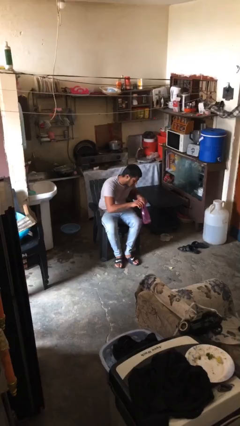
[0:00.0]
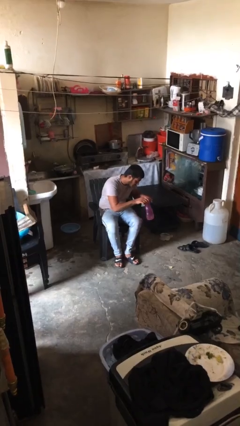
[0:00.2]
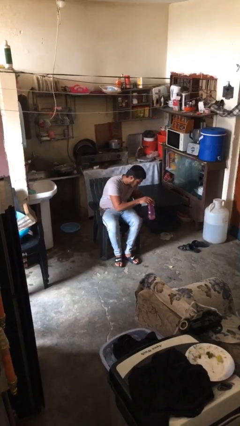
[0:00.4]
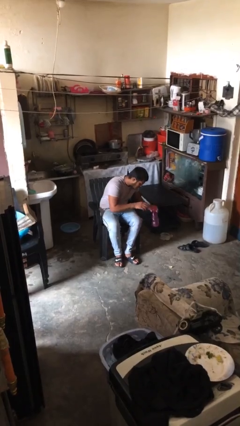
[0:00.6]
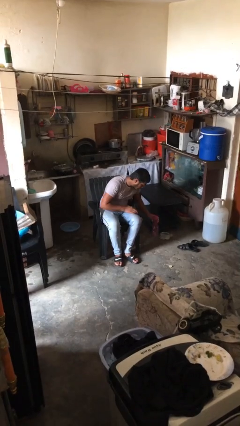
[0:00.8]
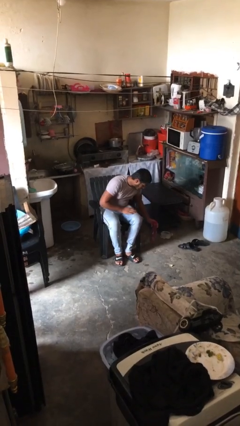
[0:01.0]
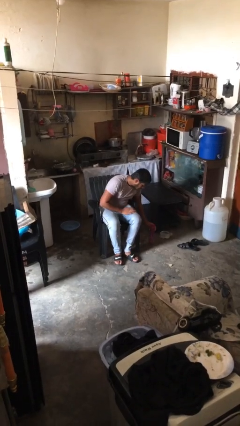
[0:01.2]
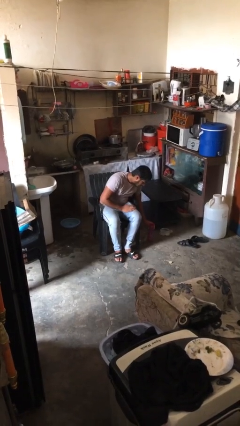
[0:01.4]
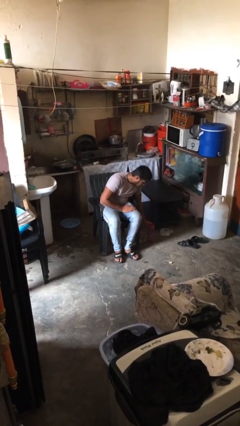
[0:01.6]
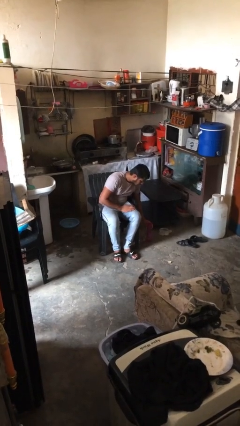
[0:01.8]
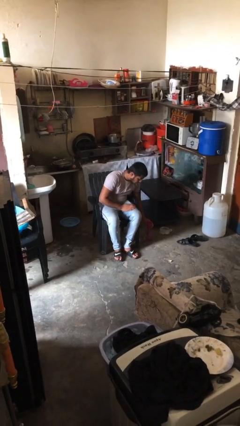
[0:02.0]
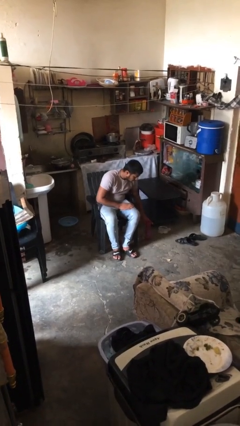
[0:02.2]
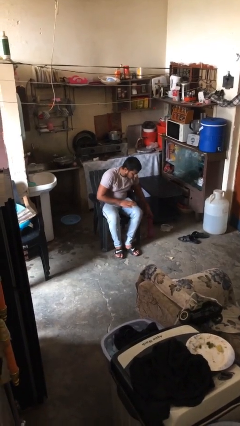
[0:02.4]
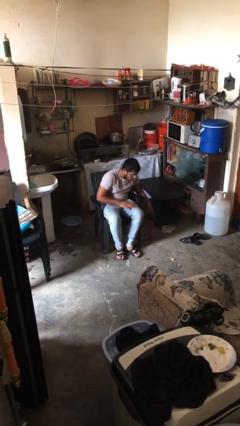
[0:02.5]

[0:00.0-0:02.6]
person puts down object on floor

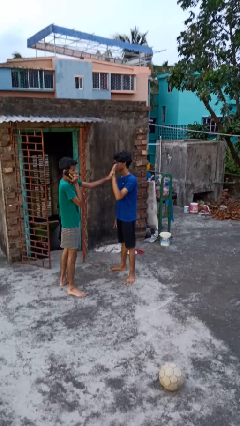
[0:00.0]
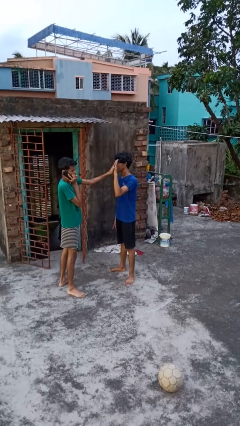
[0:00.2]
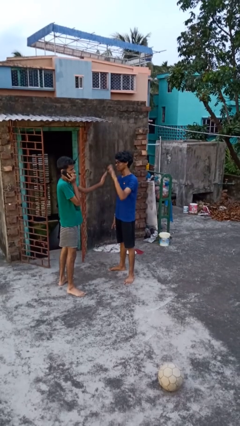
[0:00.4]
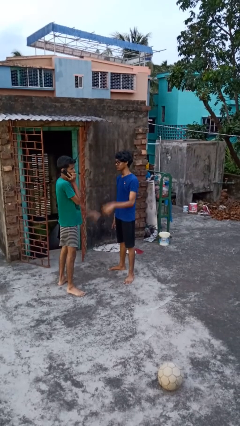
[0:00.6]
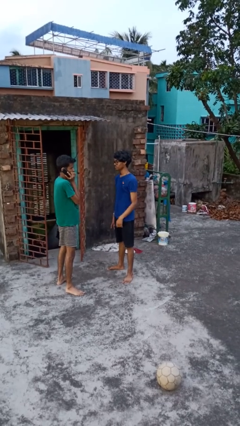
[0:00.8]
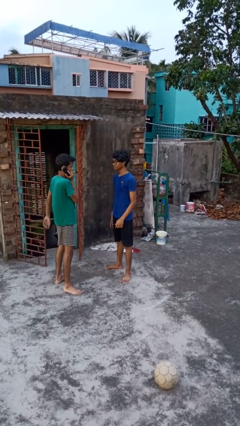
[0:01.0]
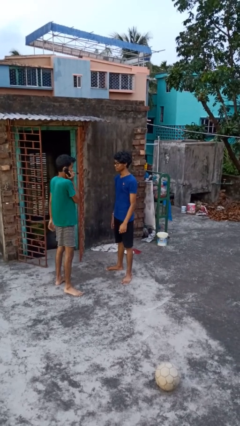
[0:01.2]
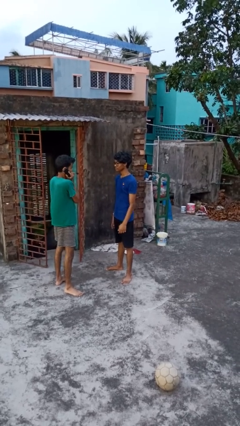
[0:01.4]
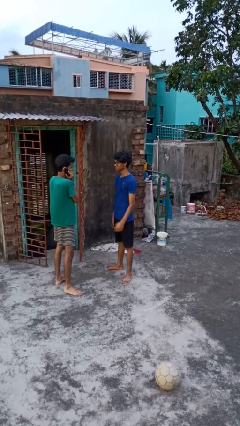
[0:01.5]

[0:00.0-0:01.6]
person highfives hand

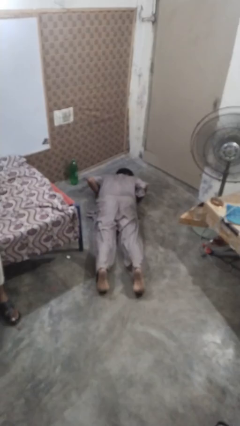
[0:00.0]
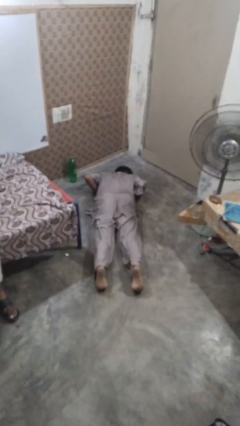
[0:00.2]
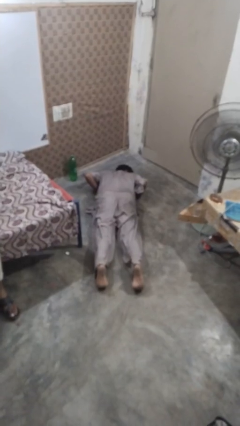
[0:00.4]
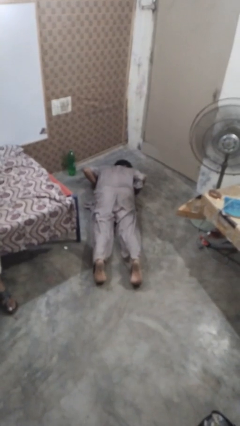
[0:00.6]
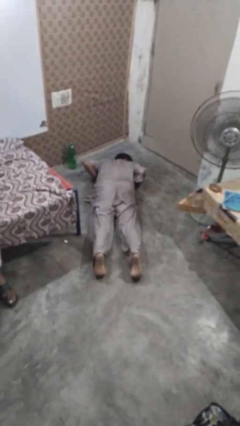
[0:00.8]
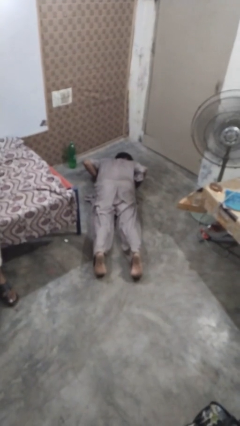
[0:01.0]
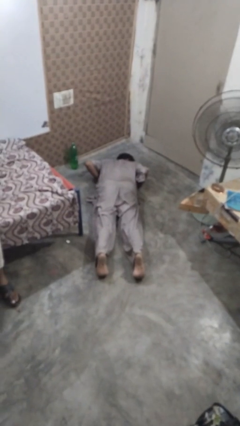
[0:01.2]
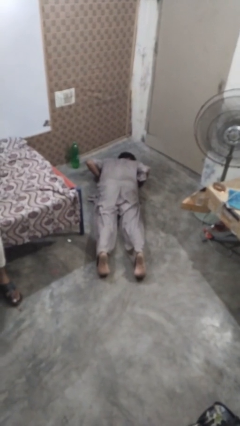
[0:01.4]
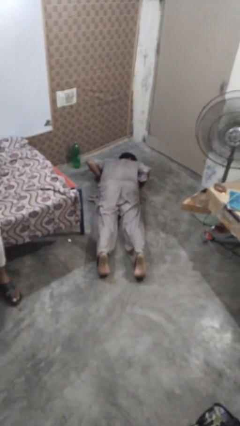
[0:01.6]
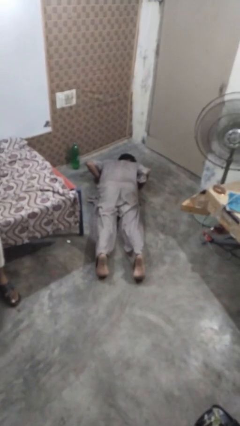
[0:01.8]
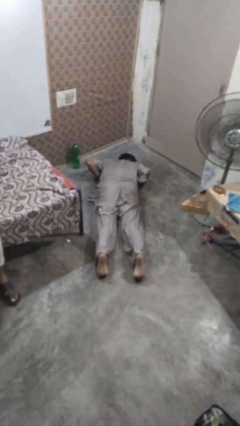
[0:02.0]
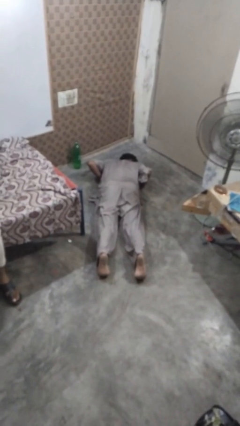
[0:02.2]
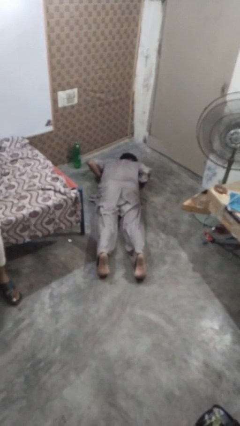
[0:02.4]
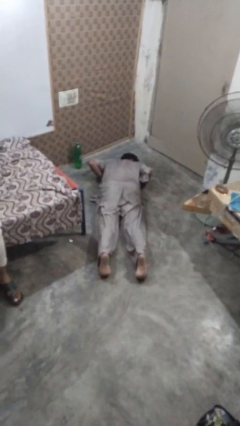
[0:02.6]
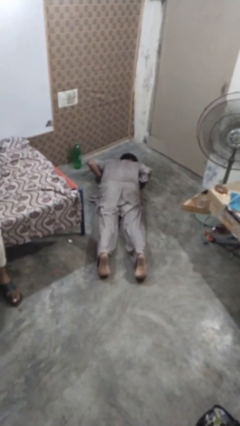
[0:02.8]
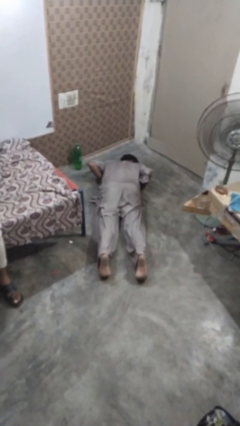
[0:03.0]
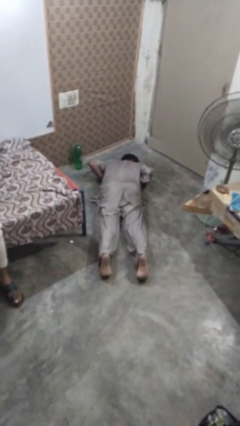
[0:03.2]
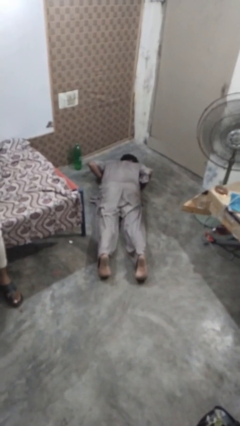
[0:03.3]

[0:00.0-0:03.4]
person lies down on floor

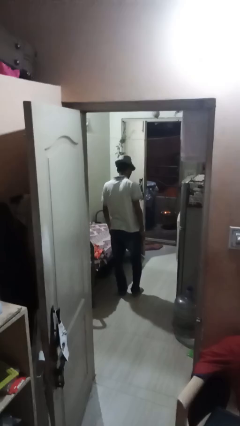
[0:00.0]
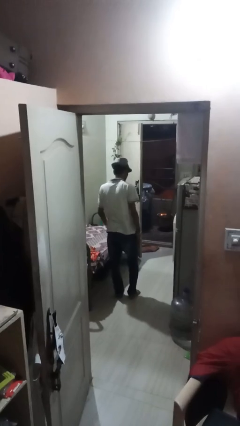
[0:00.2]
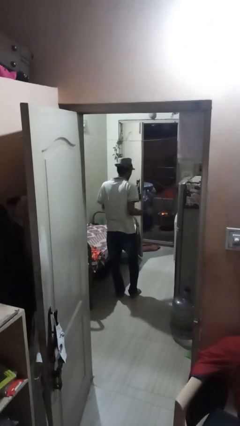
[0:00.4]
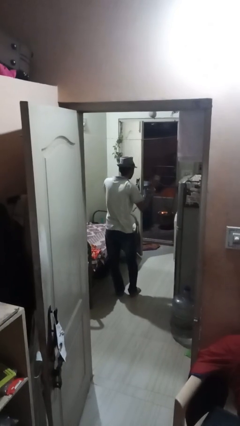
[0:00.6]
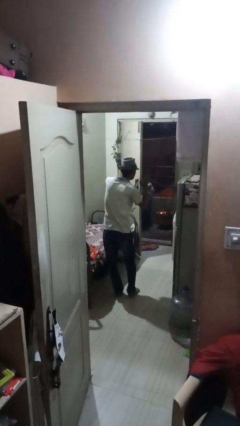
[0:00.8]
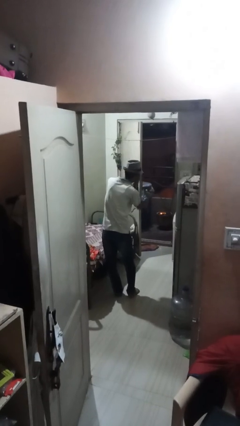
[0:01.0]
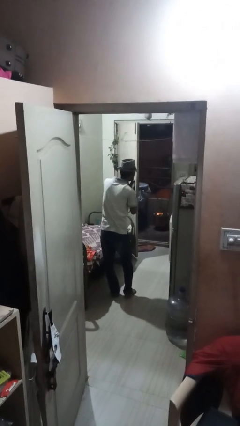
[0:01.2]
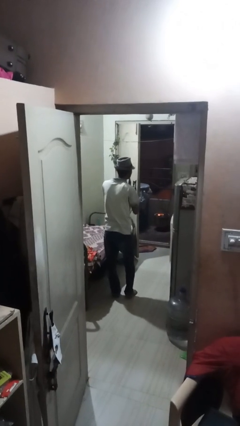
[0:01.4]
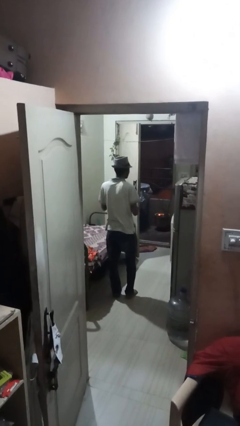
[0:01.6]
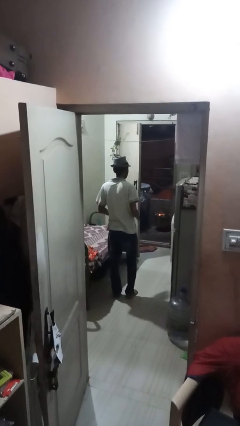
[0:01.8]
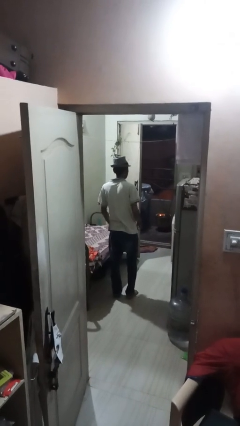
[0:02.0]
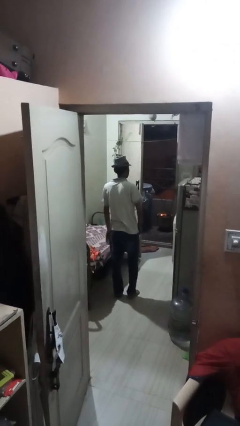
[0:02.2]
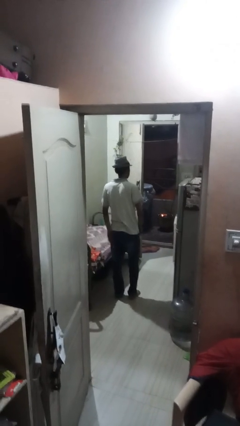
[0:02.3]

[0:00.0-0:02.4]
person swats bug

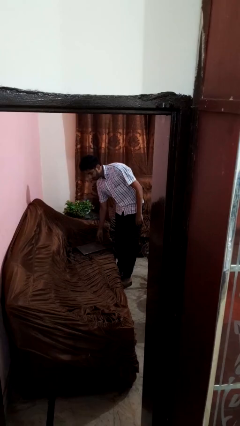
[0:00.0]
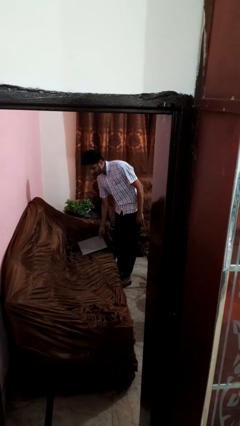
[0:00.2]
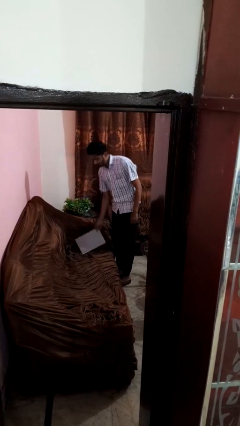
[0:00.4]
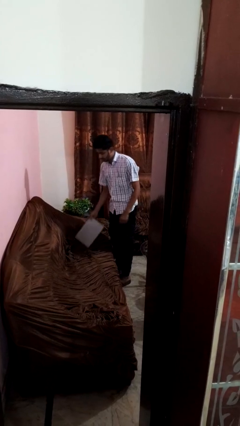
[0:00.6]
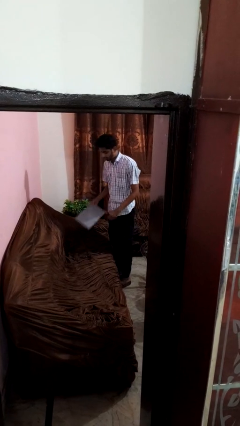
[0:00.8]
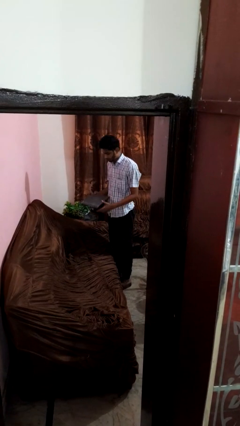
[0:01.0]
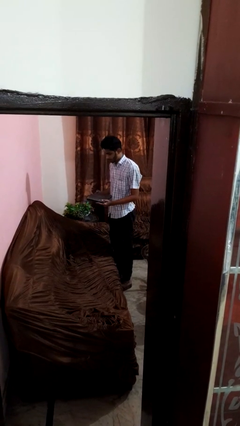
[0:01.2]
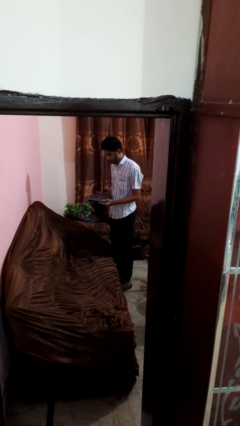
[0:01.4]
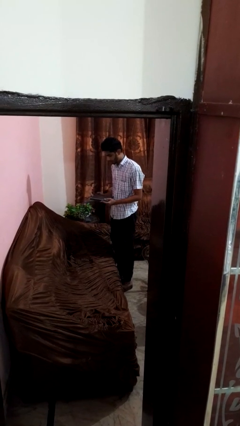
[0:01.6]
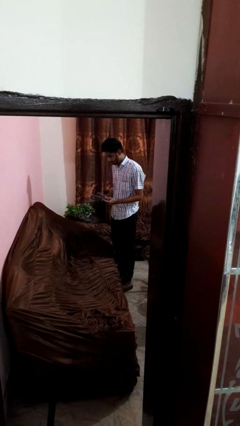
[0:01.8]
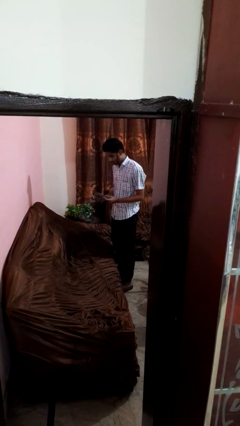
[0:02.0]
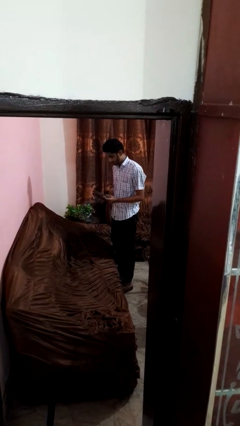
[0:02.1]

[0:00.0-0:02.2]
person picks up object from couch

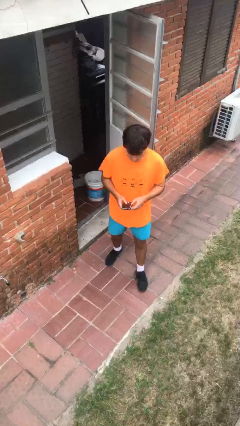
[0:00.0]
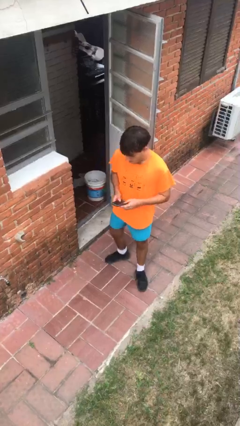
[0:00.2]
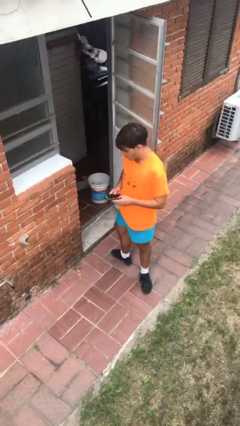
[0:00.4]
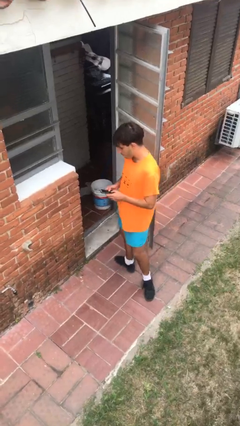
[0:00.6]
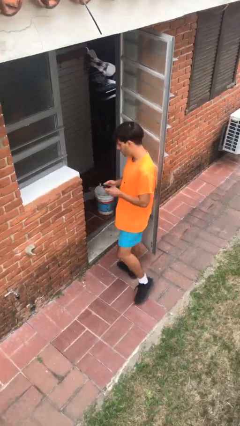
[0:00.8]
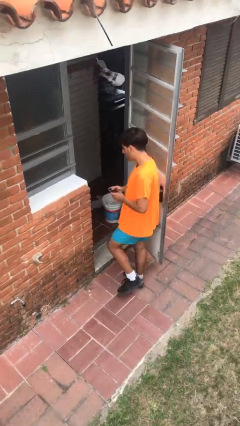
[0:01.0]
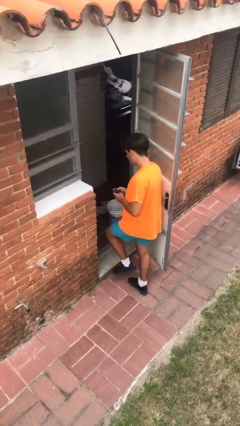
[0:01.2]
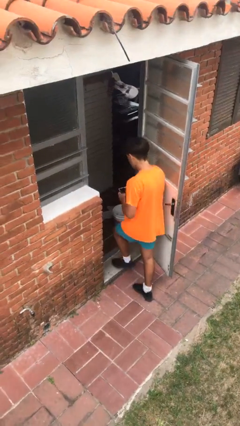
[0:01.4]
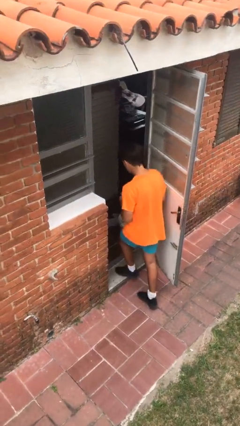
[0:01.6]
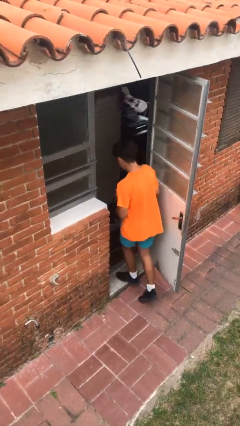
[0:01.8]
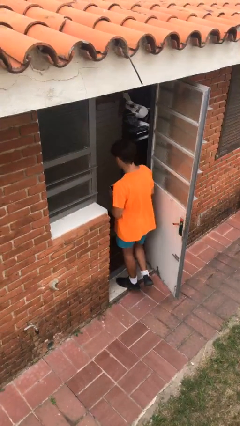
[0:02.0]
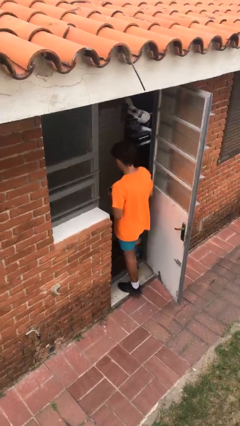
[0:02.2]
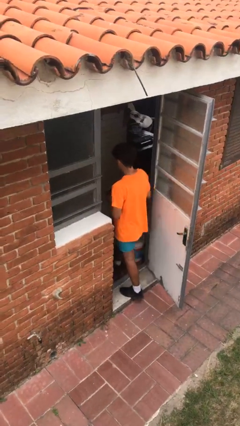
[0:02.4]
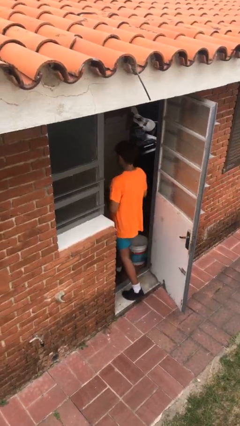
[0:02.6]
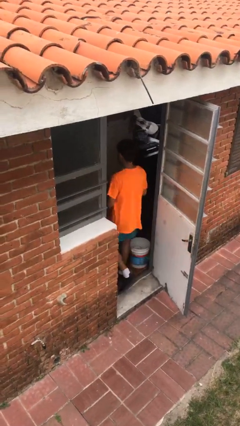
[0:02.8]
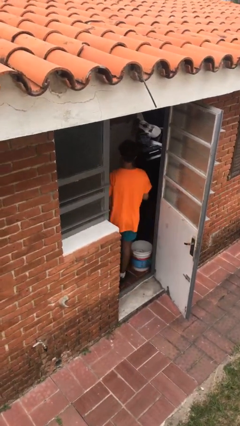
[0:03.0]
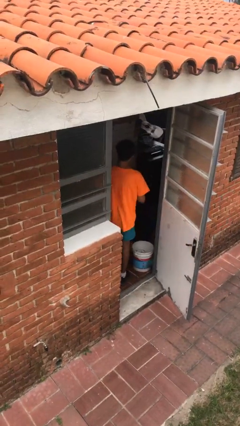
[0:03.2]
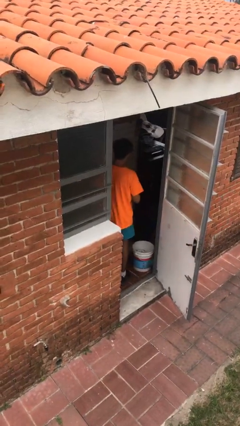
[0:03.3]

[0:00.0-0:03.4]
person exits scene through structure

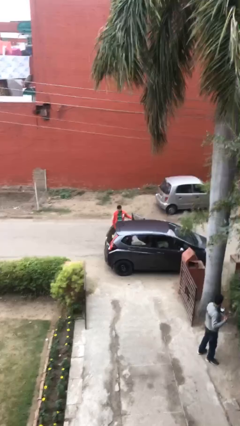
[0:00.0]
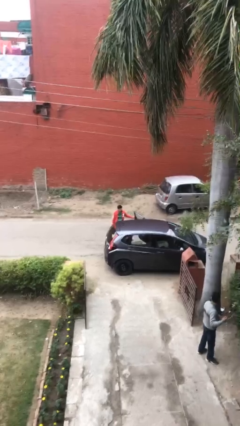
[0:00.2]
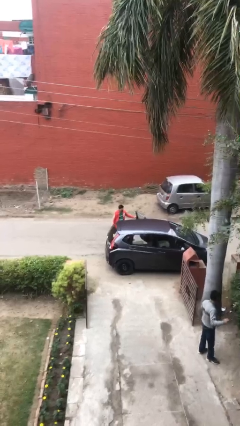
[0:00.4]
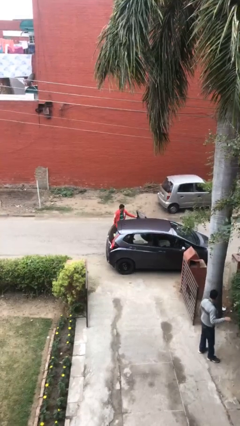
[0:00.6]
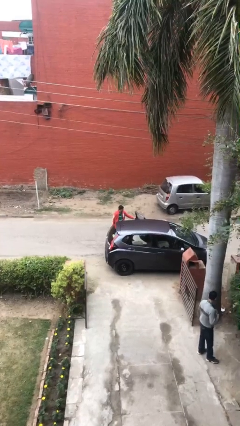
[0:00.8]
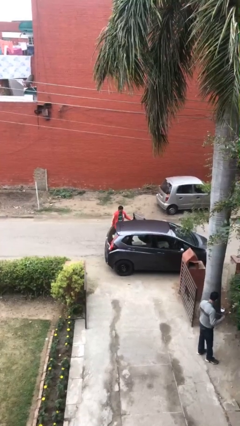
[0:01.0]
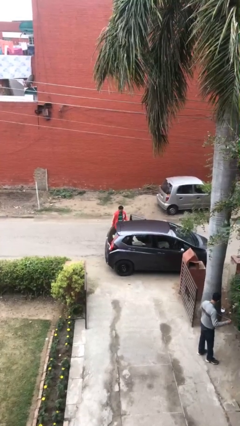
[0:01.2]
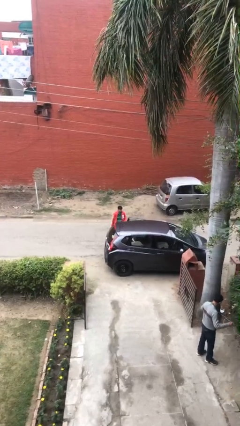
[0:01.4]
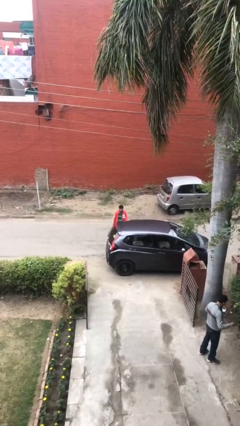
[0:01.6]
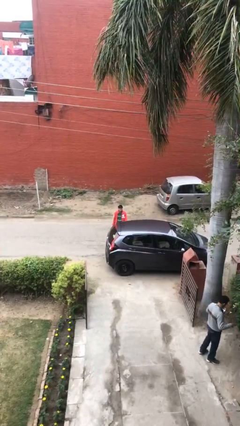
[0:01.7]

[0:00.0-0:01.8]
person closes car door
